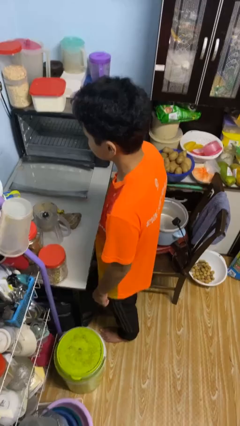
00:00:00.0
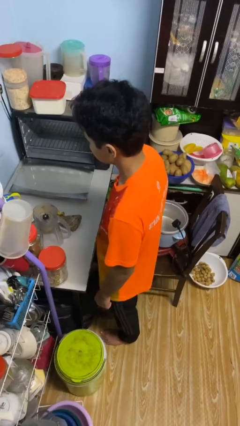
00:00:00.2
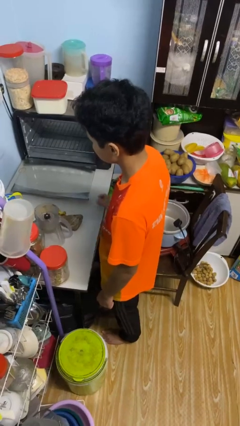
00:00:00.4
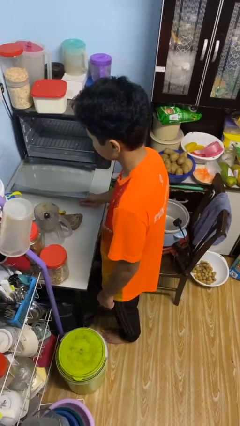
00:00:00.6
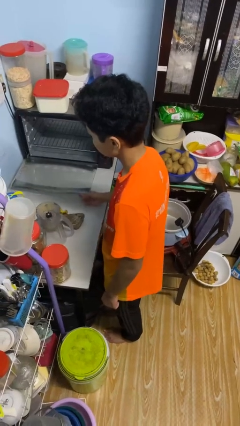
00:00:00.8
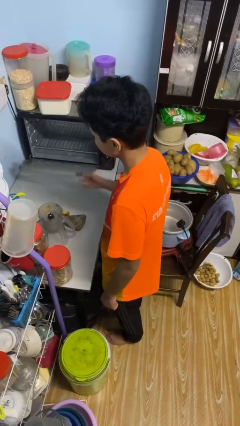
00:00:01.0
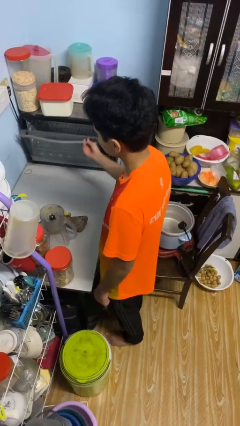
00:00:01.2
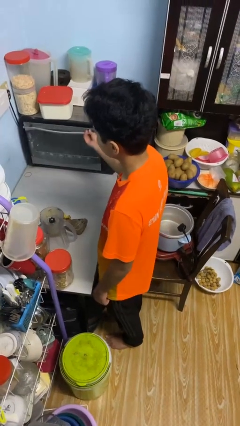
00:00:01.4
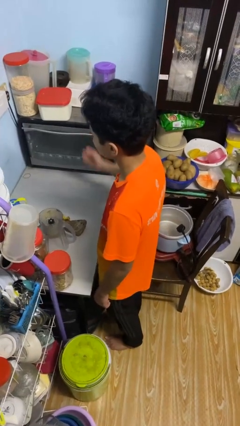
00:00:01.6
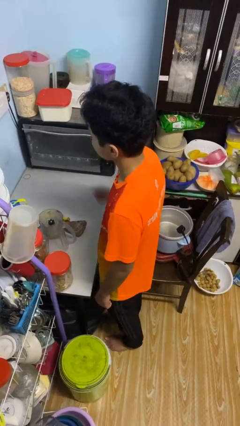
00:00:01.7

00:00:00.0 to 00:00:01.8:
person closes oven door

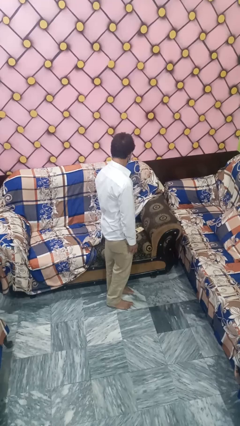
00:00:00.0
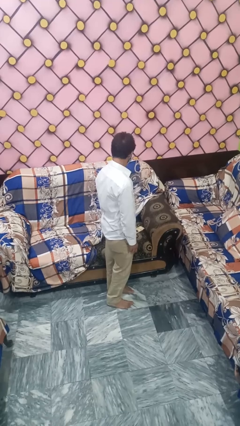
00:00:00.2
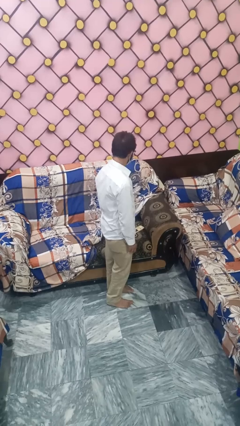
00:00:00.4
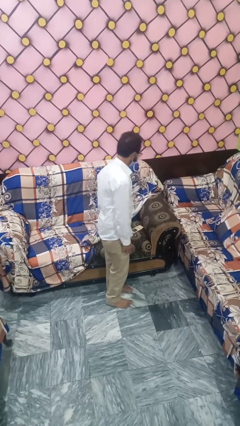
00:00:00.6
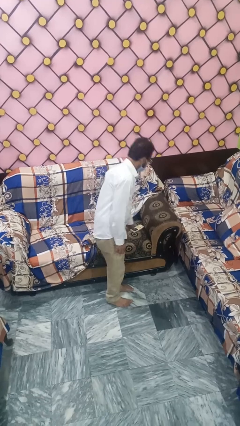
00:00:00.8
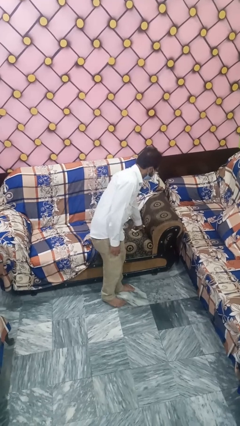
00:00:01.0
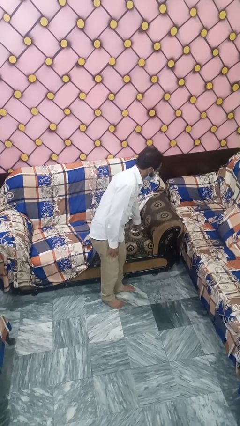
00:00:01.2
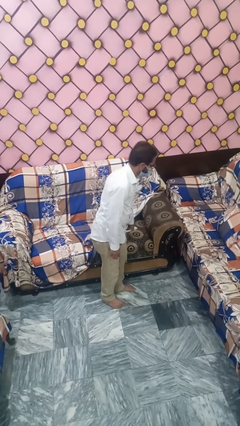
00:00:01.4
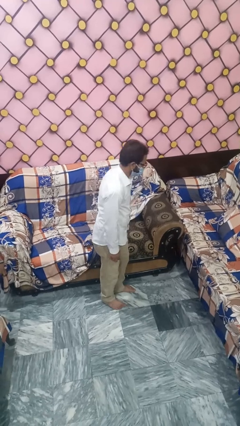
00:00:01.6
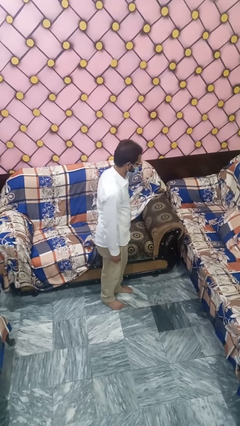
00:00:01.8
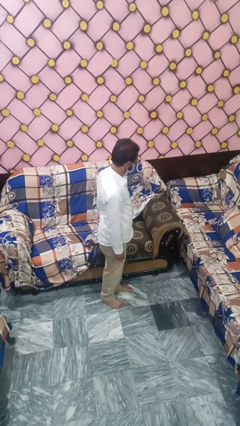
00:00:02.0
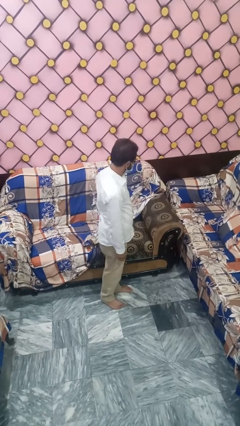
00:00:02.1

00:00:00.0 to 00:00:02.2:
person searches under couch

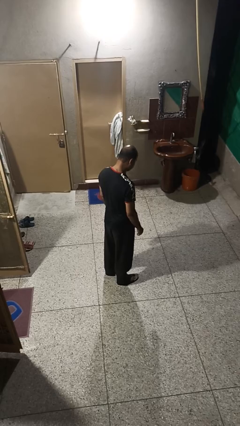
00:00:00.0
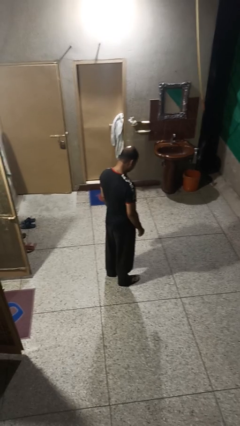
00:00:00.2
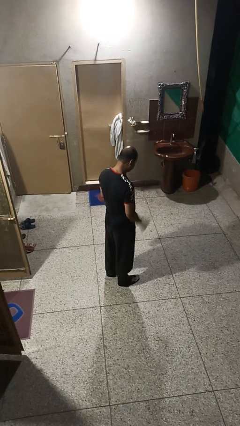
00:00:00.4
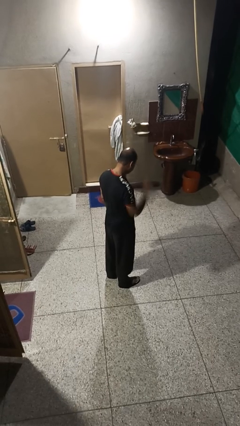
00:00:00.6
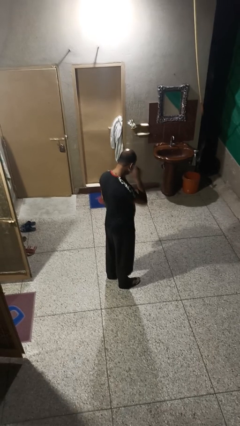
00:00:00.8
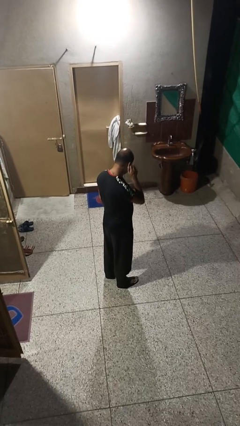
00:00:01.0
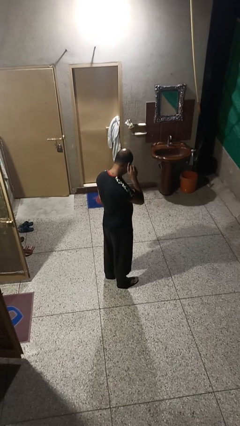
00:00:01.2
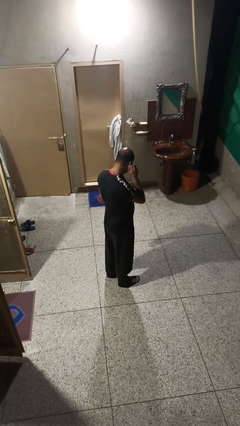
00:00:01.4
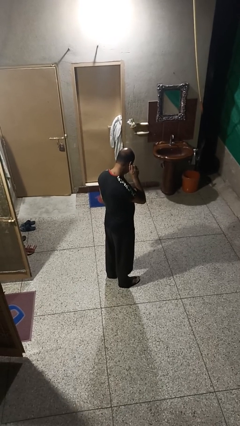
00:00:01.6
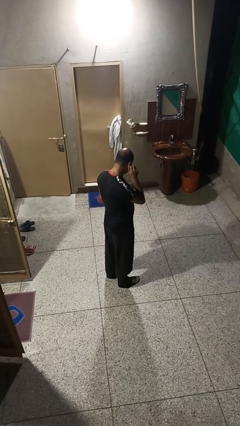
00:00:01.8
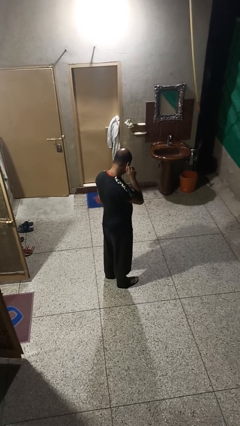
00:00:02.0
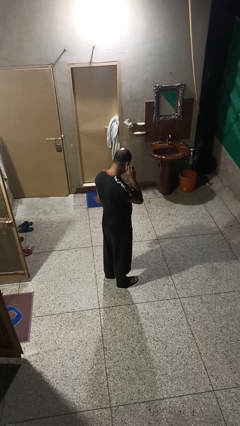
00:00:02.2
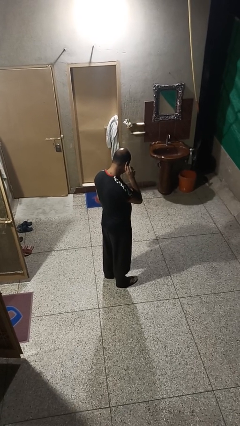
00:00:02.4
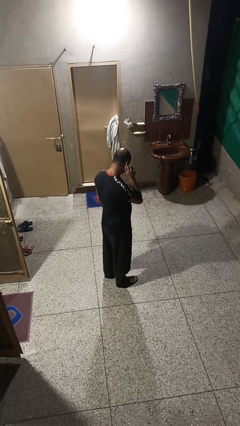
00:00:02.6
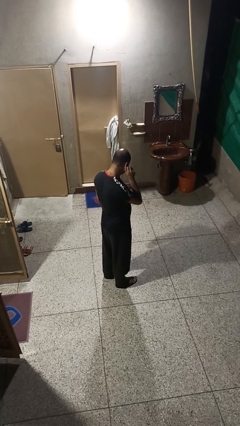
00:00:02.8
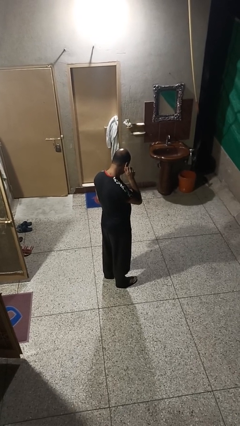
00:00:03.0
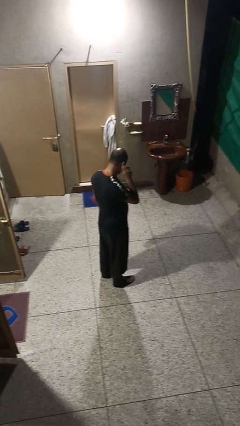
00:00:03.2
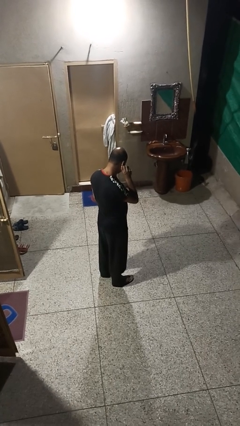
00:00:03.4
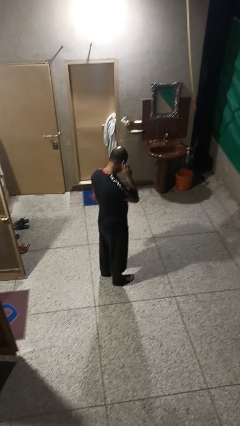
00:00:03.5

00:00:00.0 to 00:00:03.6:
person touches earlobe

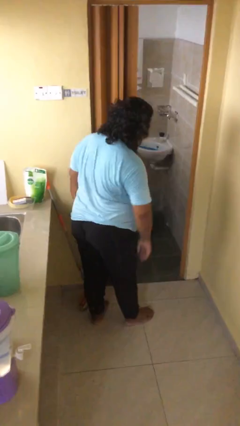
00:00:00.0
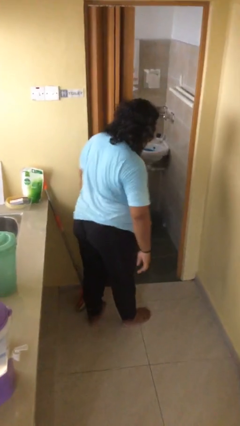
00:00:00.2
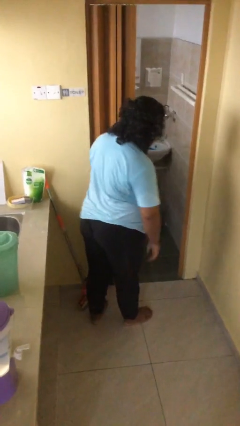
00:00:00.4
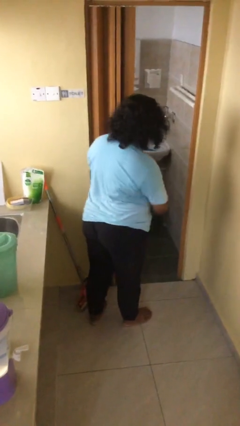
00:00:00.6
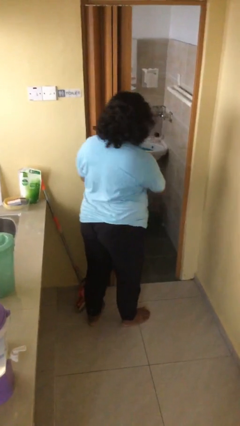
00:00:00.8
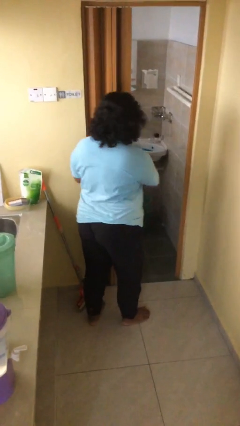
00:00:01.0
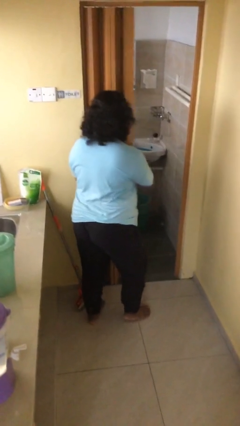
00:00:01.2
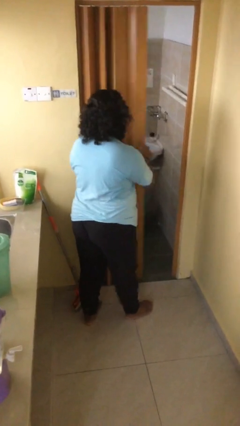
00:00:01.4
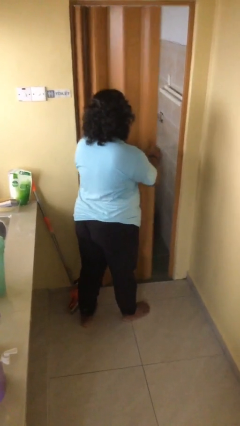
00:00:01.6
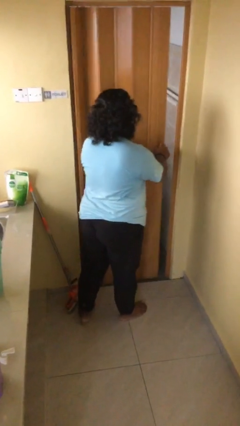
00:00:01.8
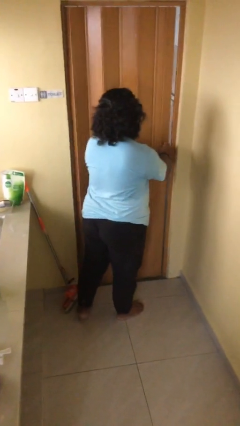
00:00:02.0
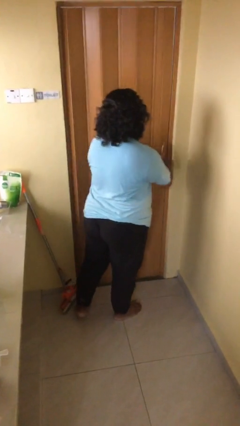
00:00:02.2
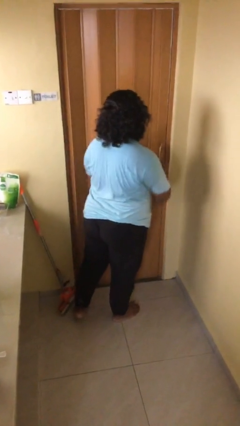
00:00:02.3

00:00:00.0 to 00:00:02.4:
person closes sliding door

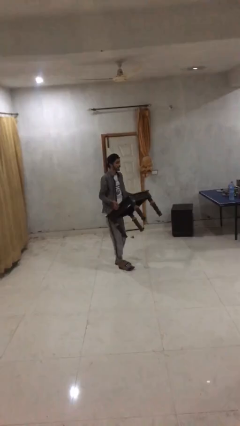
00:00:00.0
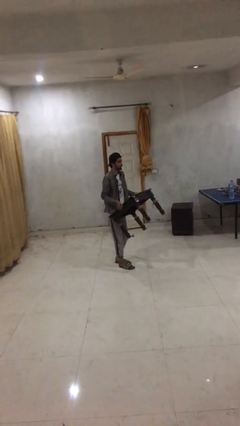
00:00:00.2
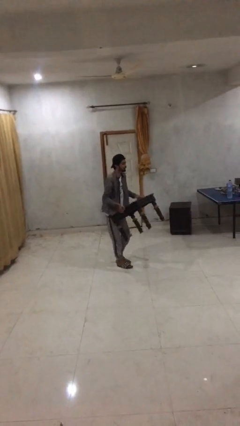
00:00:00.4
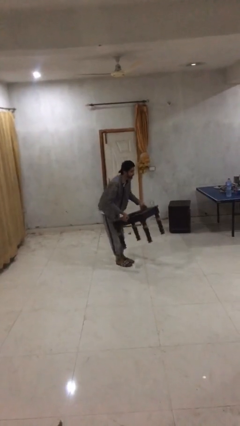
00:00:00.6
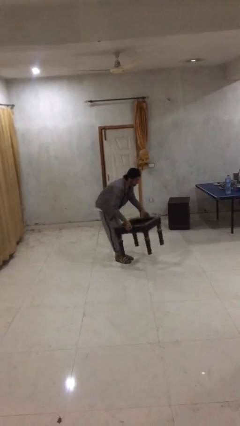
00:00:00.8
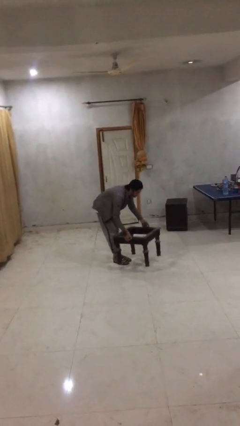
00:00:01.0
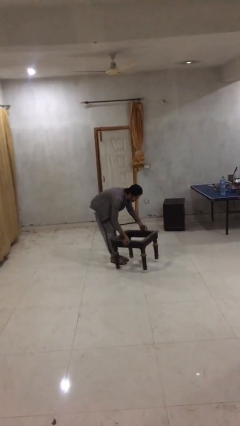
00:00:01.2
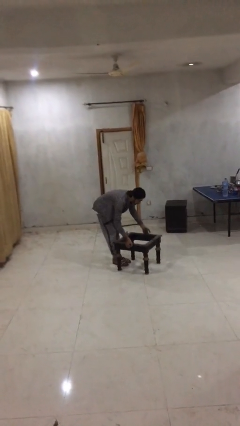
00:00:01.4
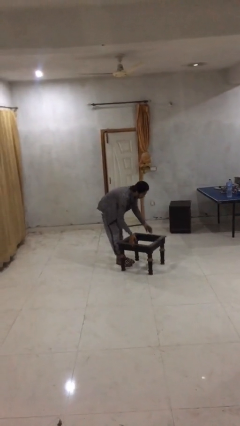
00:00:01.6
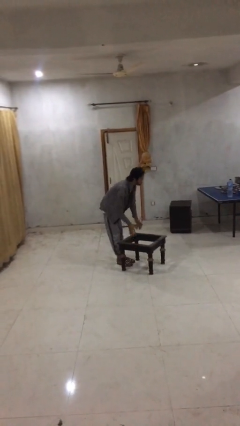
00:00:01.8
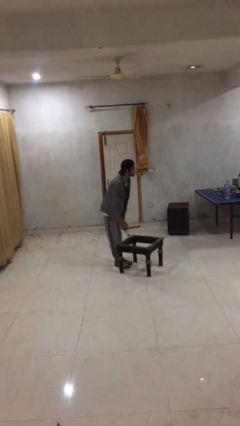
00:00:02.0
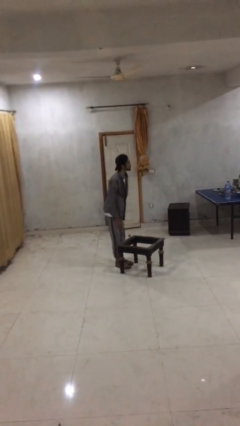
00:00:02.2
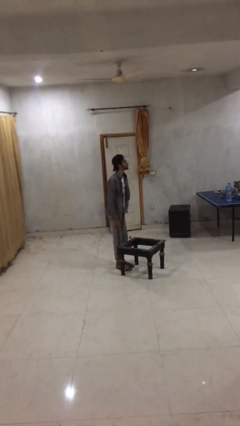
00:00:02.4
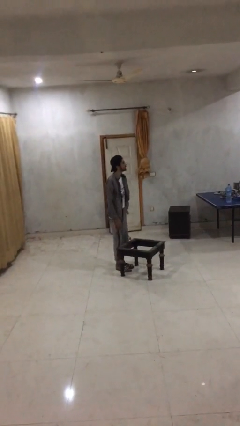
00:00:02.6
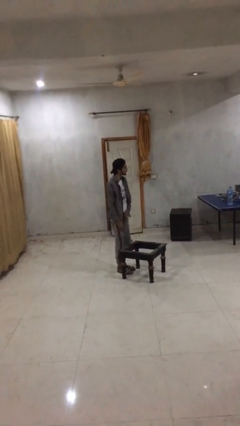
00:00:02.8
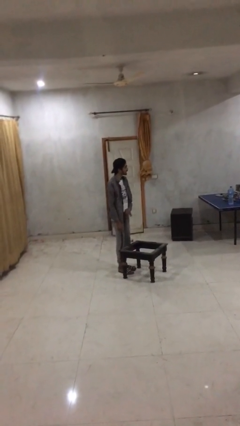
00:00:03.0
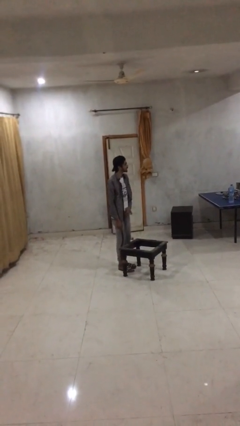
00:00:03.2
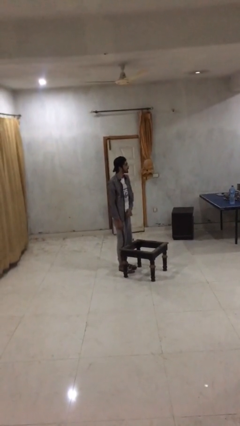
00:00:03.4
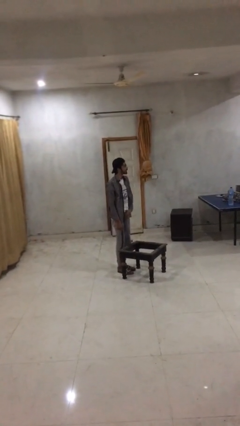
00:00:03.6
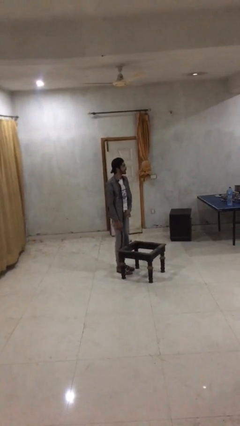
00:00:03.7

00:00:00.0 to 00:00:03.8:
person puts down object on floor

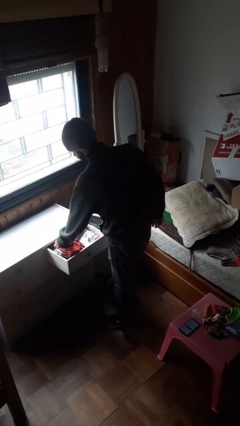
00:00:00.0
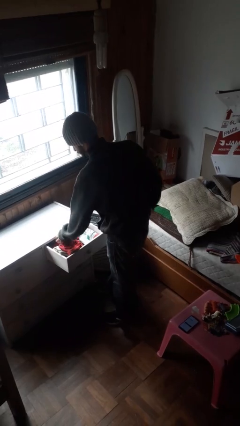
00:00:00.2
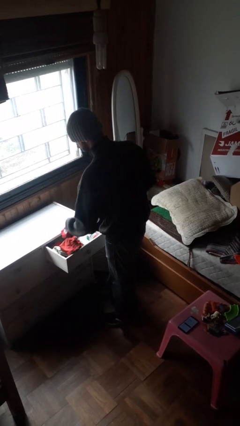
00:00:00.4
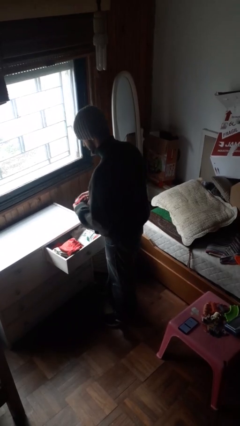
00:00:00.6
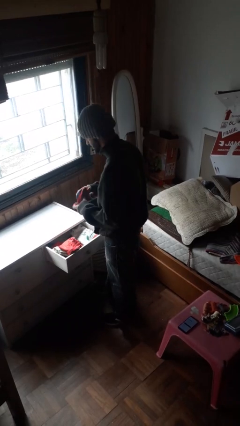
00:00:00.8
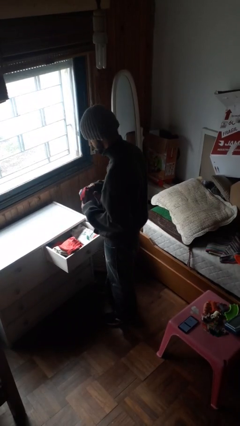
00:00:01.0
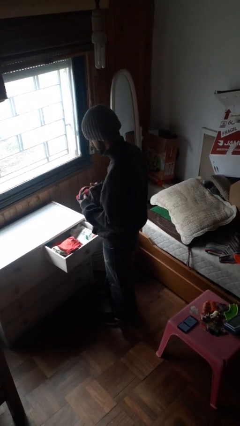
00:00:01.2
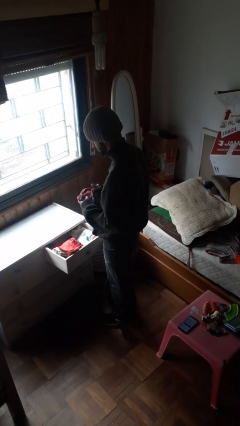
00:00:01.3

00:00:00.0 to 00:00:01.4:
person takes clothes from dresser

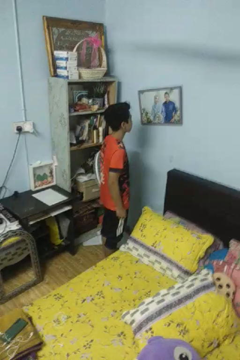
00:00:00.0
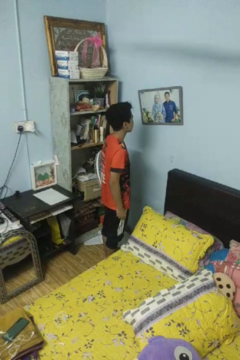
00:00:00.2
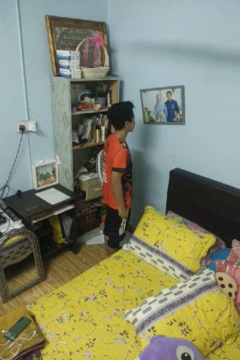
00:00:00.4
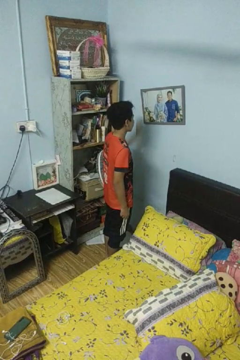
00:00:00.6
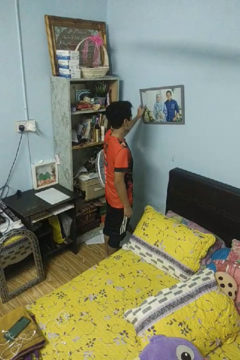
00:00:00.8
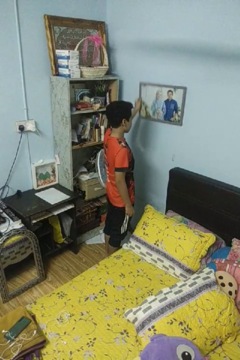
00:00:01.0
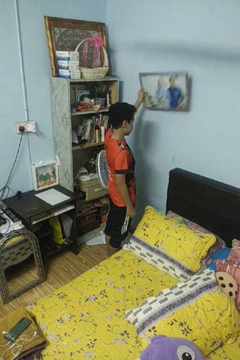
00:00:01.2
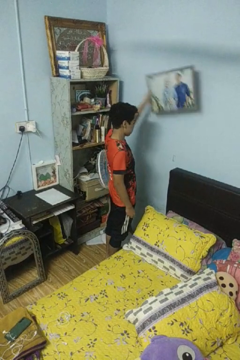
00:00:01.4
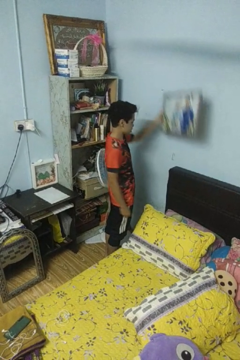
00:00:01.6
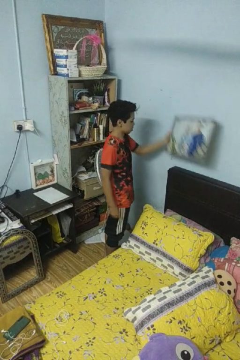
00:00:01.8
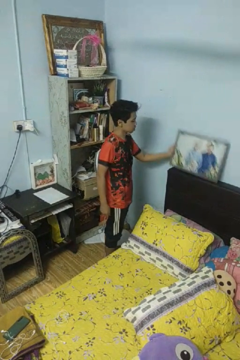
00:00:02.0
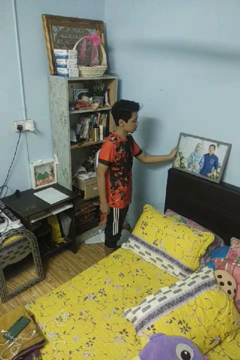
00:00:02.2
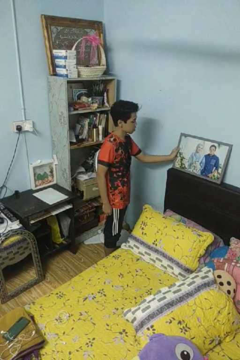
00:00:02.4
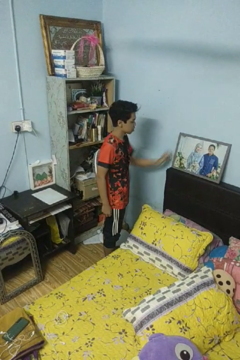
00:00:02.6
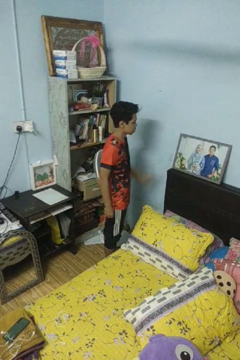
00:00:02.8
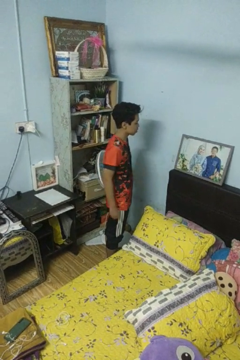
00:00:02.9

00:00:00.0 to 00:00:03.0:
person takes down picture frame
